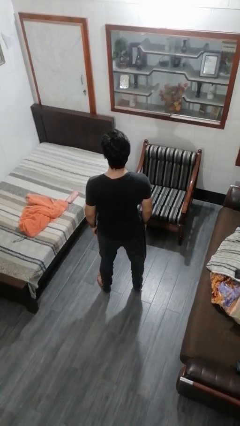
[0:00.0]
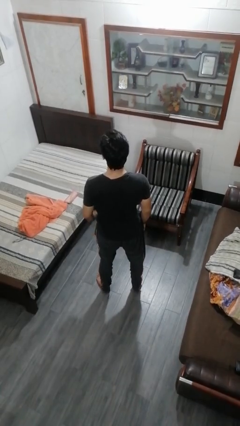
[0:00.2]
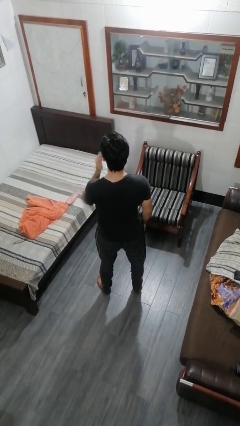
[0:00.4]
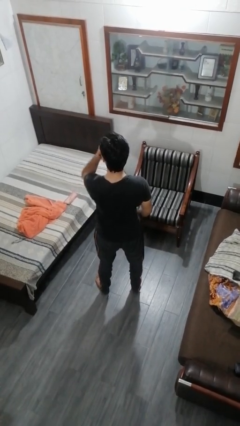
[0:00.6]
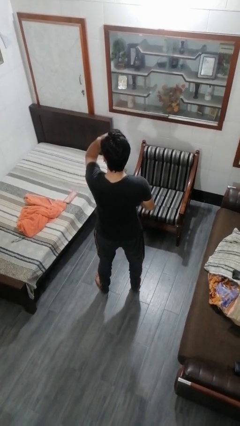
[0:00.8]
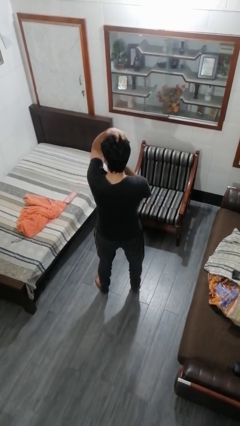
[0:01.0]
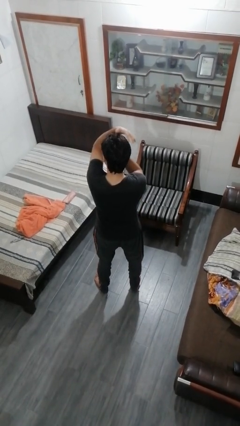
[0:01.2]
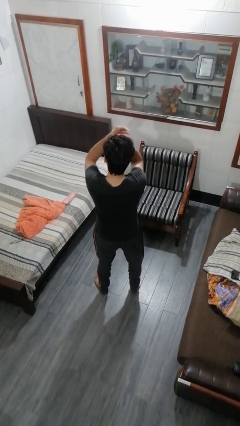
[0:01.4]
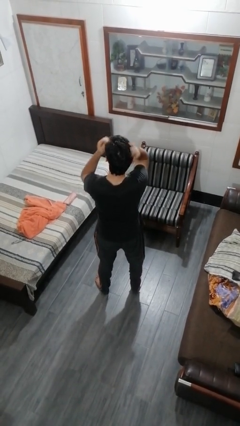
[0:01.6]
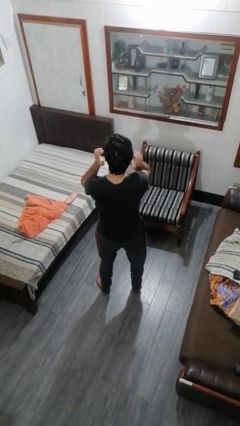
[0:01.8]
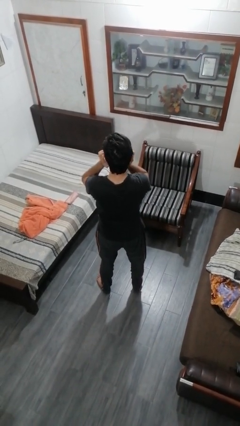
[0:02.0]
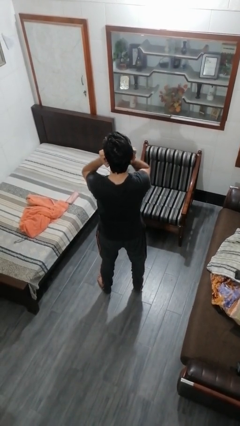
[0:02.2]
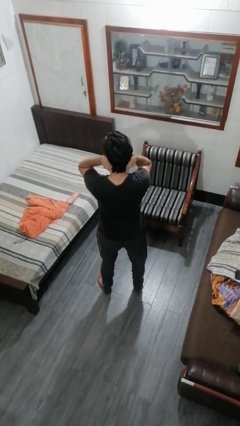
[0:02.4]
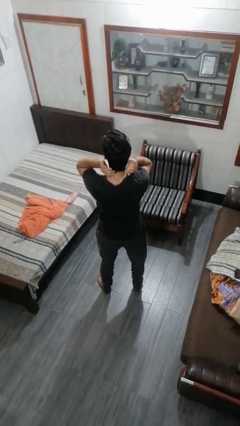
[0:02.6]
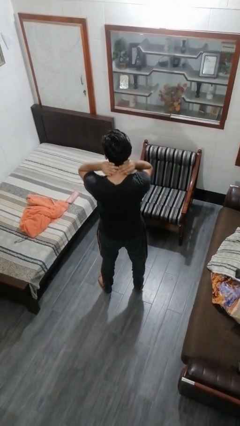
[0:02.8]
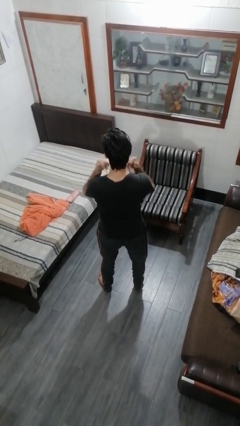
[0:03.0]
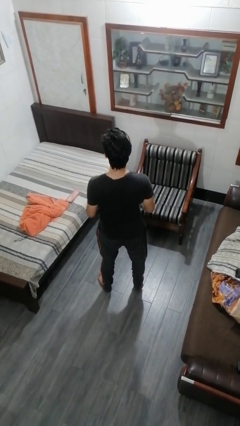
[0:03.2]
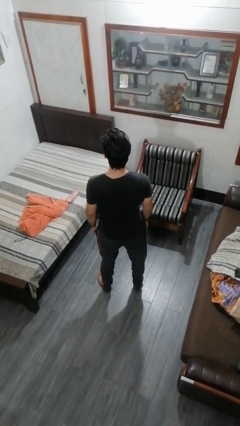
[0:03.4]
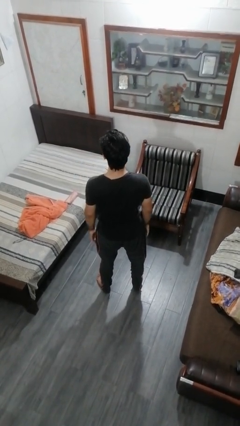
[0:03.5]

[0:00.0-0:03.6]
person strokes hair

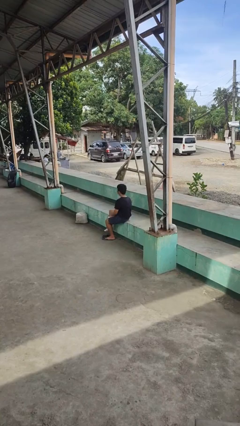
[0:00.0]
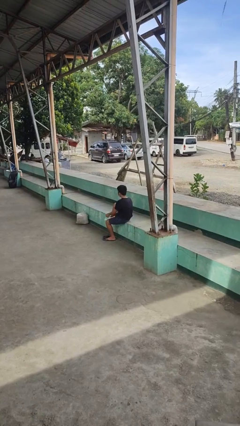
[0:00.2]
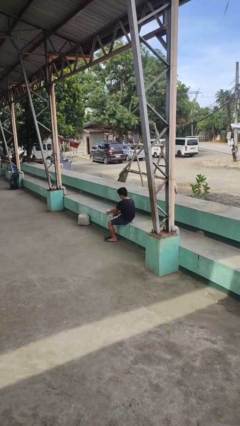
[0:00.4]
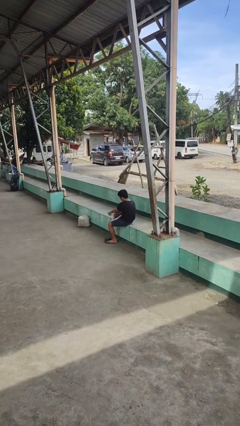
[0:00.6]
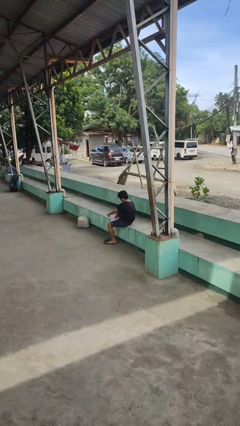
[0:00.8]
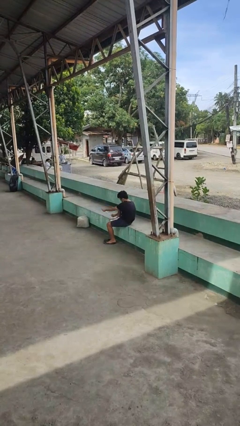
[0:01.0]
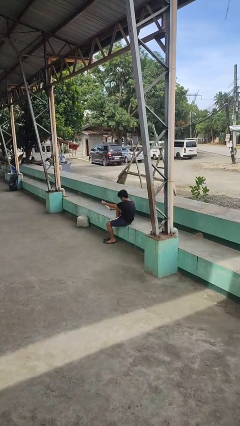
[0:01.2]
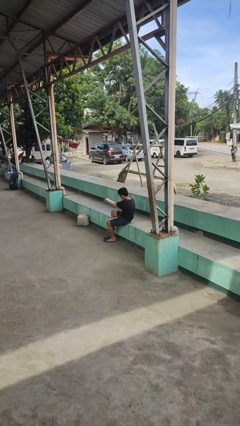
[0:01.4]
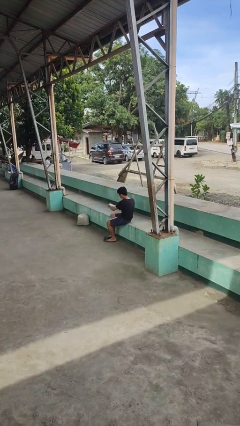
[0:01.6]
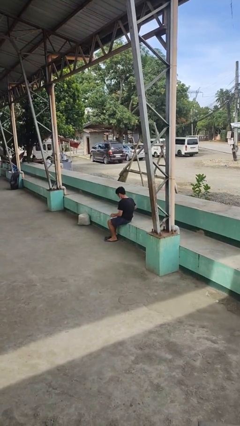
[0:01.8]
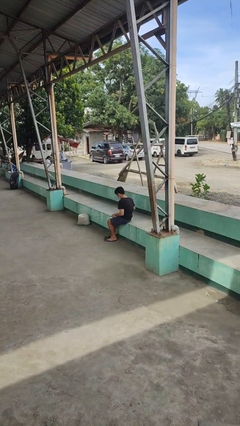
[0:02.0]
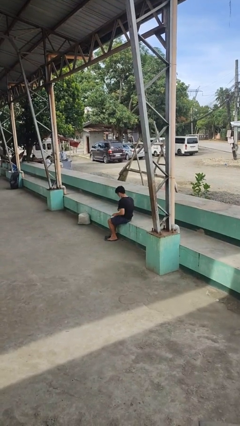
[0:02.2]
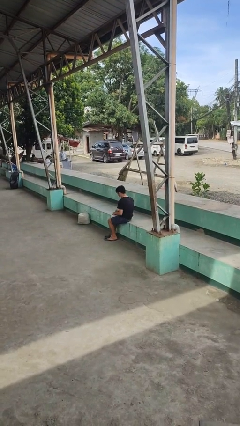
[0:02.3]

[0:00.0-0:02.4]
person takes off socks

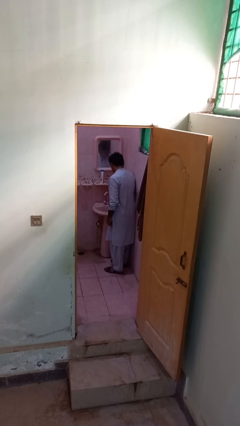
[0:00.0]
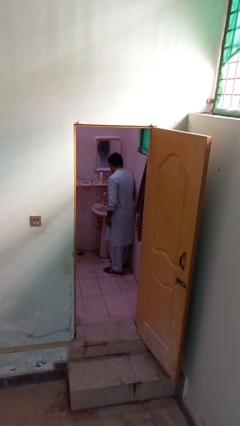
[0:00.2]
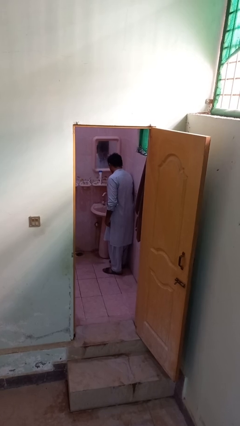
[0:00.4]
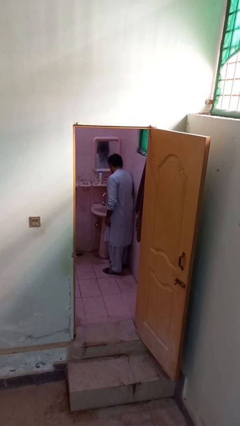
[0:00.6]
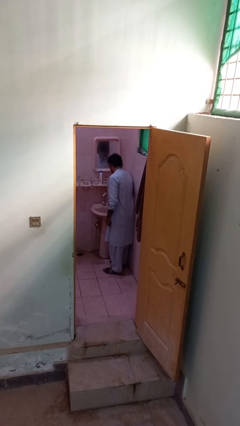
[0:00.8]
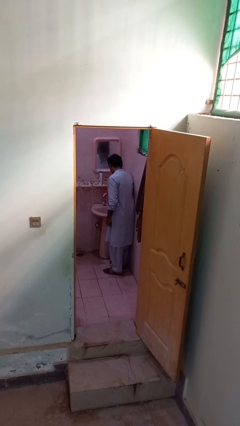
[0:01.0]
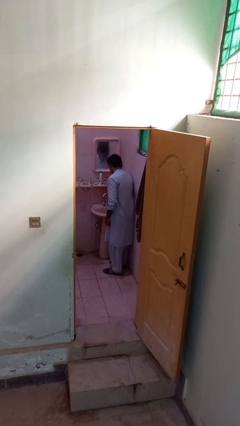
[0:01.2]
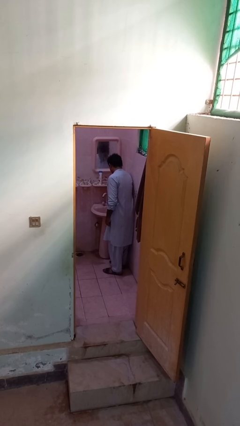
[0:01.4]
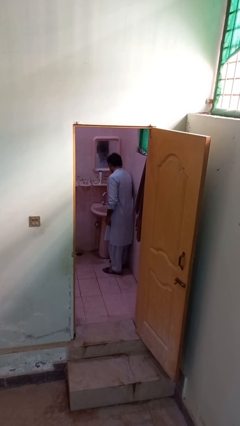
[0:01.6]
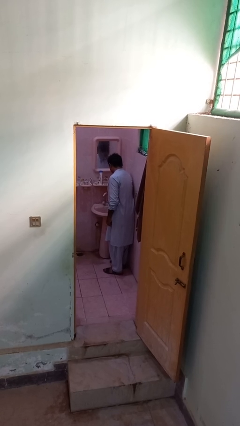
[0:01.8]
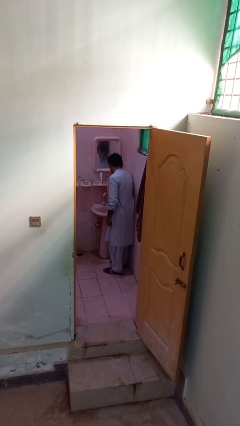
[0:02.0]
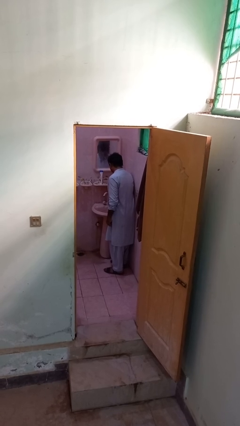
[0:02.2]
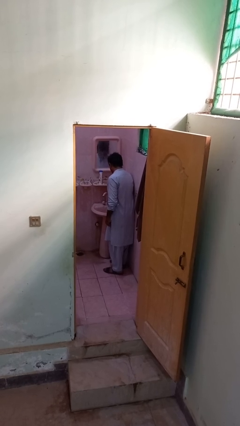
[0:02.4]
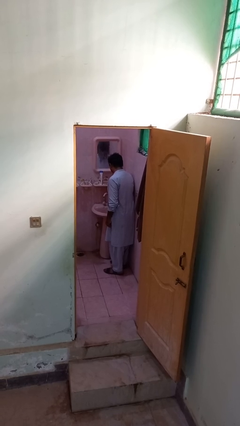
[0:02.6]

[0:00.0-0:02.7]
person turns off faucet

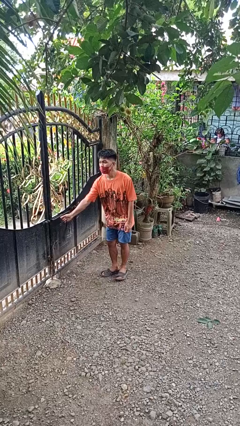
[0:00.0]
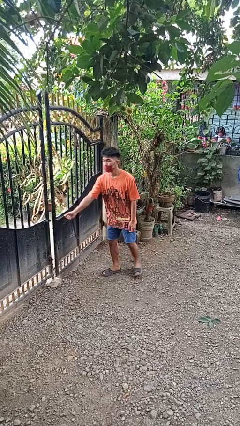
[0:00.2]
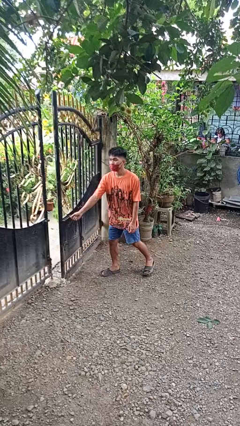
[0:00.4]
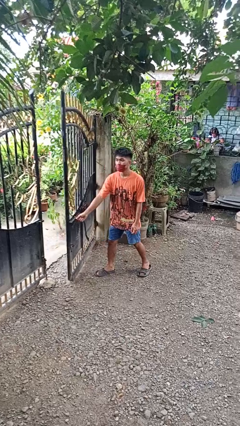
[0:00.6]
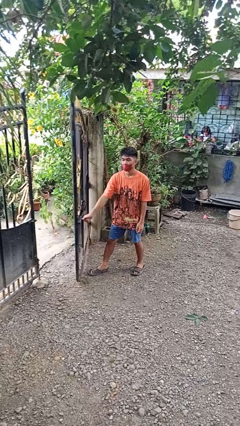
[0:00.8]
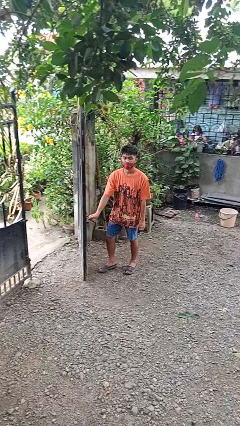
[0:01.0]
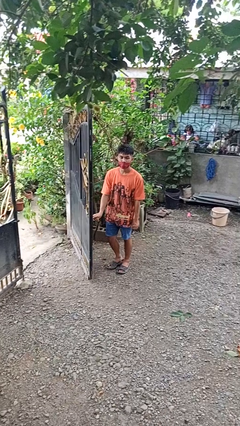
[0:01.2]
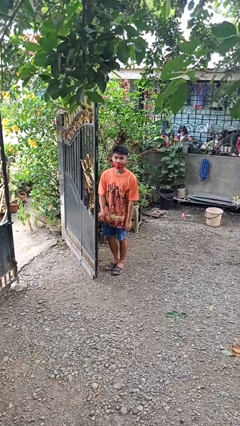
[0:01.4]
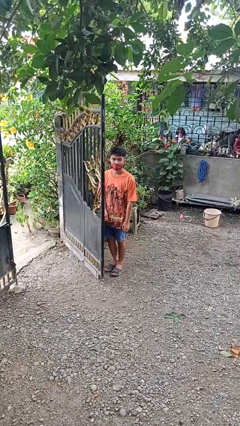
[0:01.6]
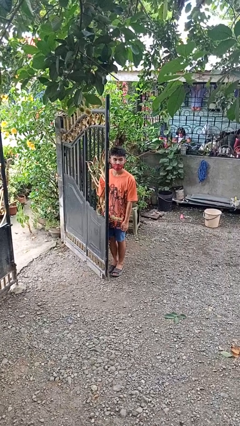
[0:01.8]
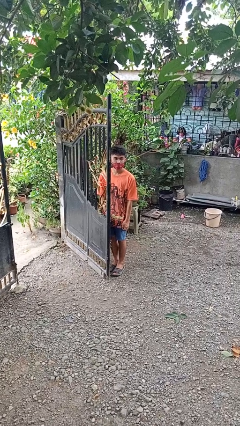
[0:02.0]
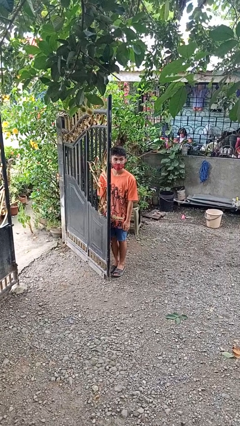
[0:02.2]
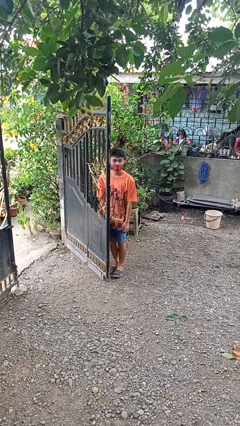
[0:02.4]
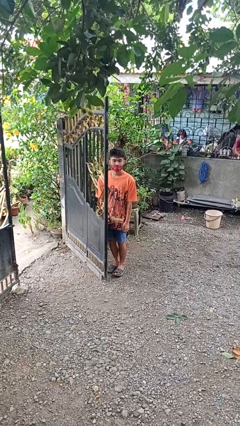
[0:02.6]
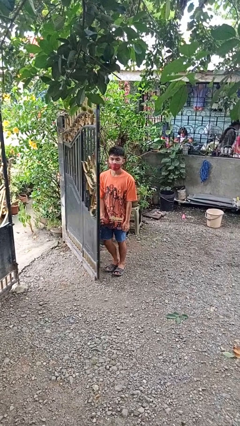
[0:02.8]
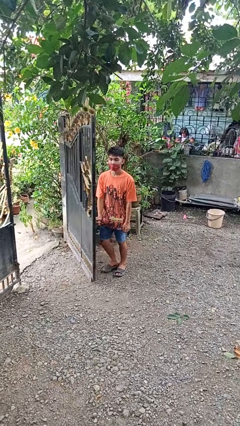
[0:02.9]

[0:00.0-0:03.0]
person opens gate

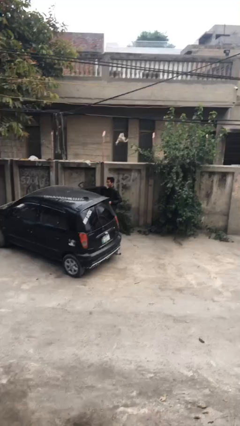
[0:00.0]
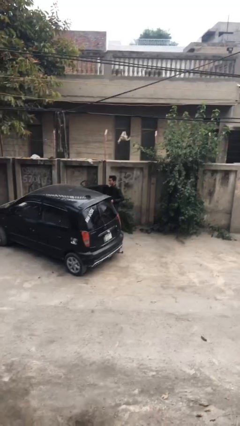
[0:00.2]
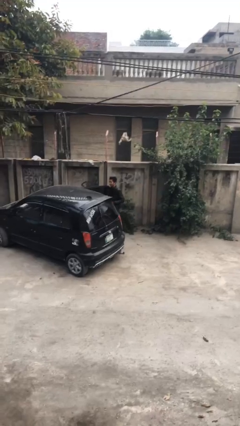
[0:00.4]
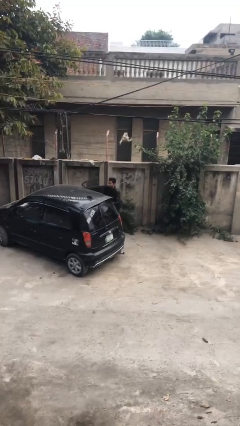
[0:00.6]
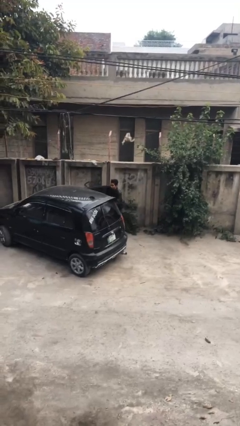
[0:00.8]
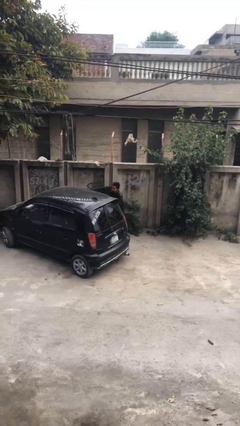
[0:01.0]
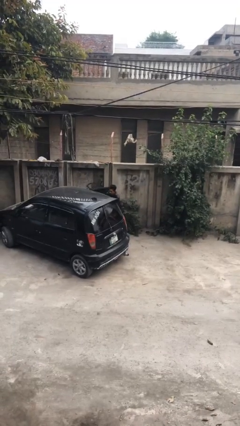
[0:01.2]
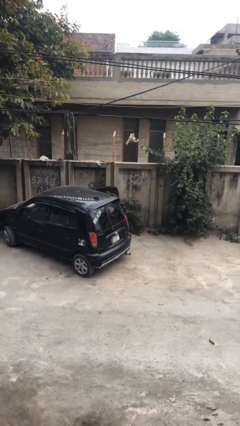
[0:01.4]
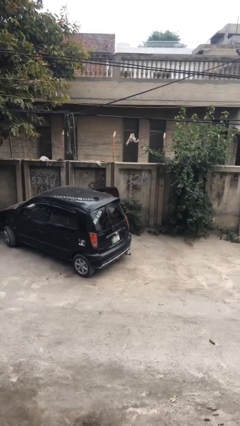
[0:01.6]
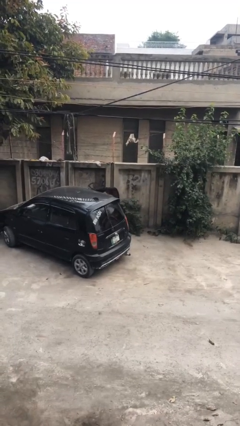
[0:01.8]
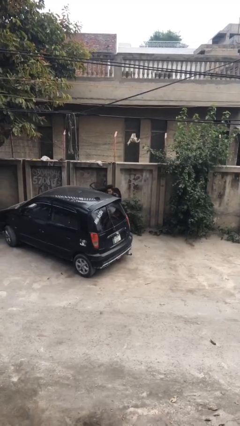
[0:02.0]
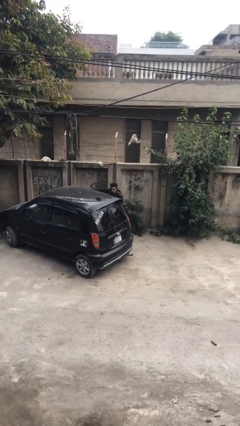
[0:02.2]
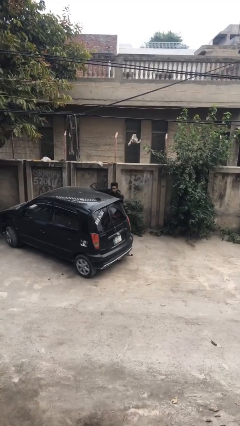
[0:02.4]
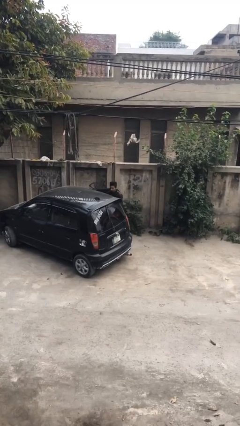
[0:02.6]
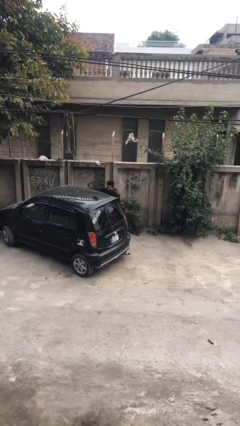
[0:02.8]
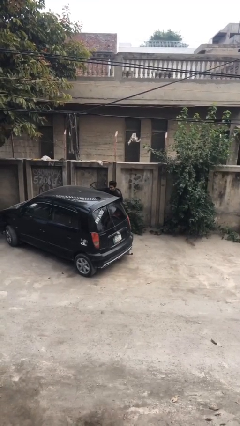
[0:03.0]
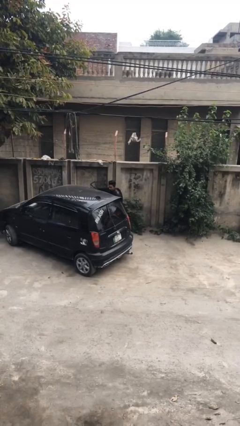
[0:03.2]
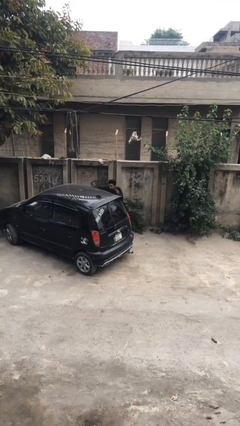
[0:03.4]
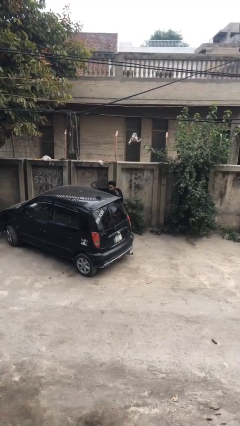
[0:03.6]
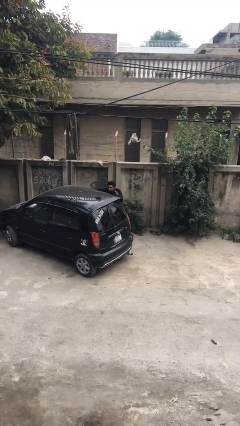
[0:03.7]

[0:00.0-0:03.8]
person loads car

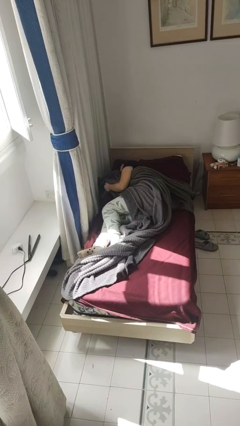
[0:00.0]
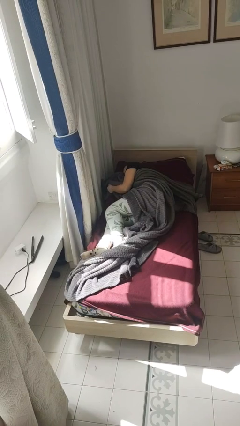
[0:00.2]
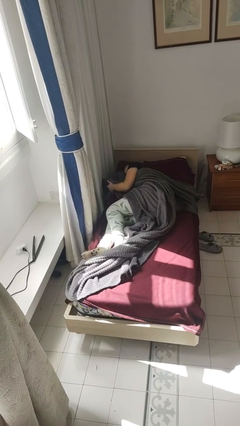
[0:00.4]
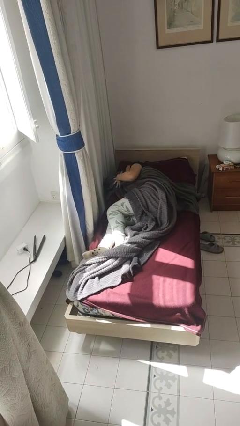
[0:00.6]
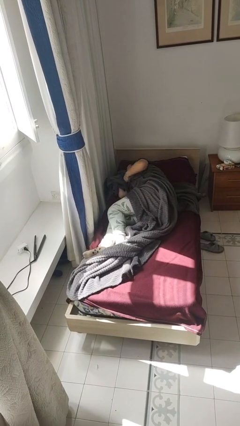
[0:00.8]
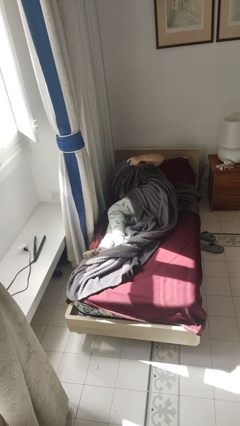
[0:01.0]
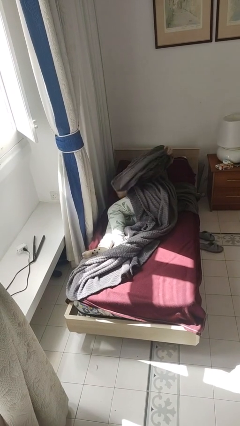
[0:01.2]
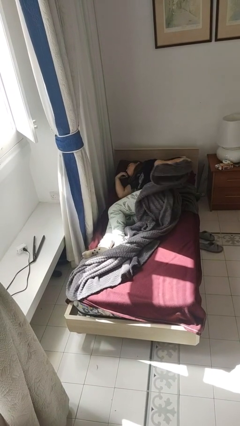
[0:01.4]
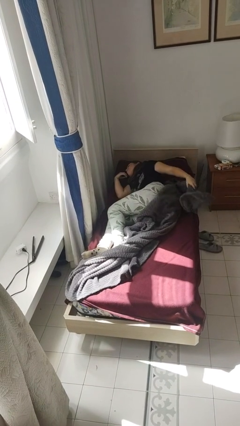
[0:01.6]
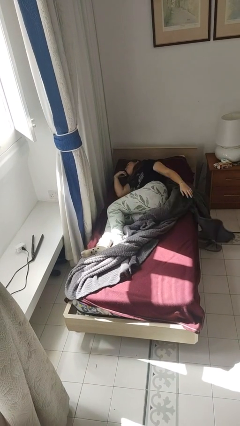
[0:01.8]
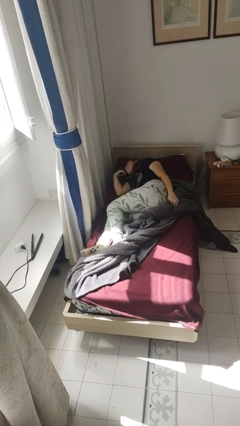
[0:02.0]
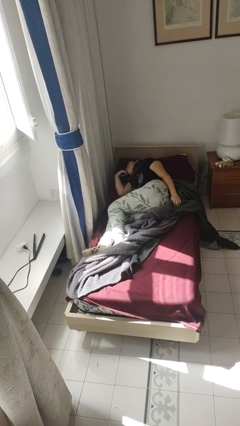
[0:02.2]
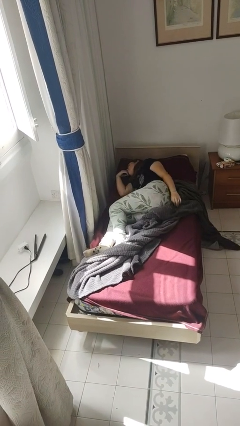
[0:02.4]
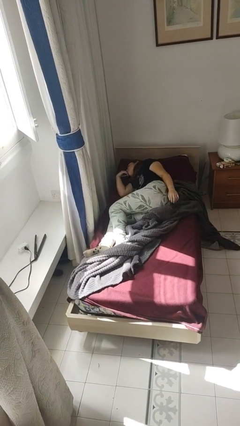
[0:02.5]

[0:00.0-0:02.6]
person uncovers with bedsheets
